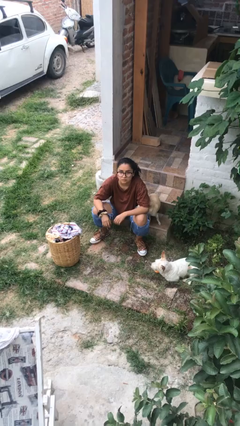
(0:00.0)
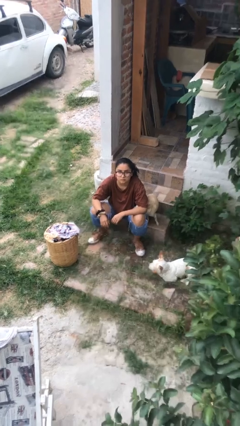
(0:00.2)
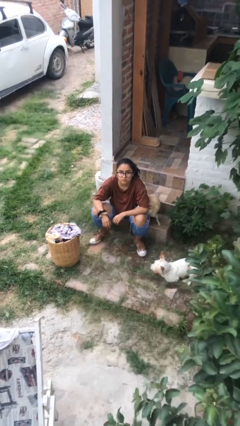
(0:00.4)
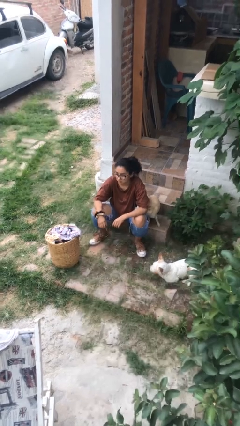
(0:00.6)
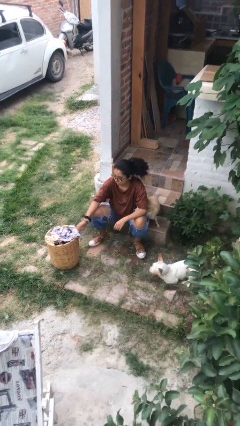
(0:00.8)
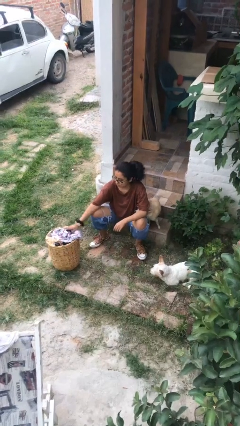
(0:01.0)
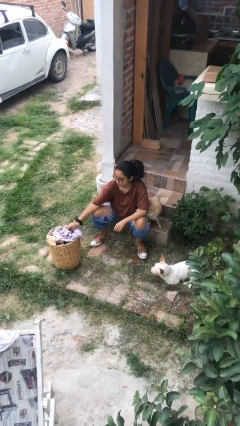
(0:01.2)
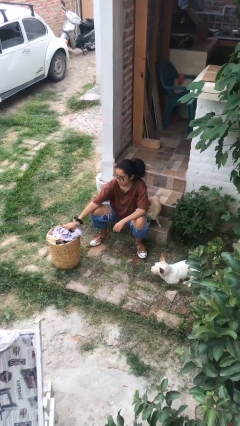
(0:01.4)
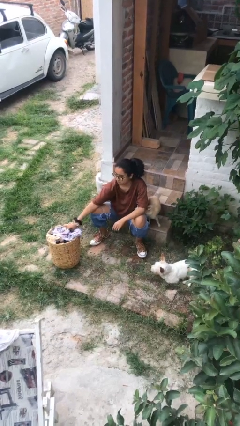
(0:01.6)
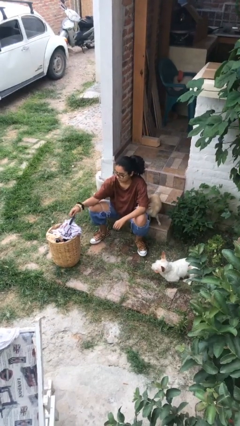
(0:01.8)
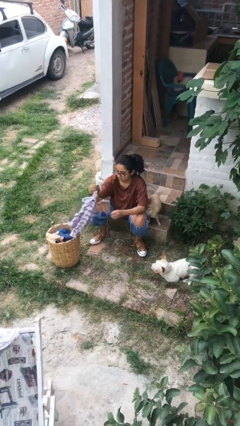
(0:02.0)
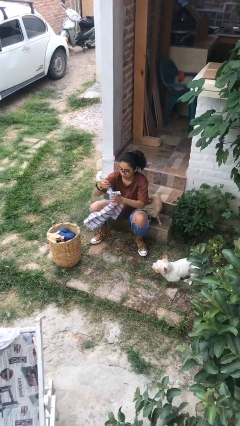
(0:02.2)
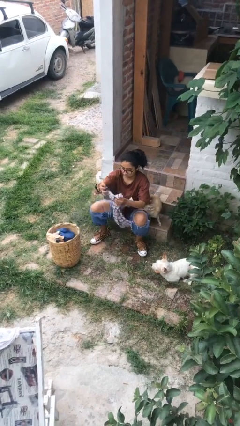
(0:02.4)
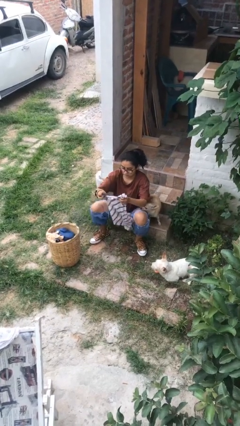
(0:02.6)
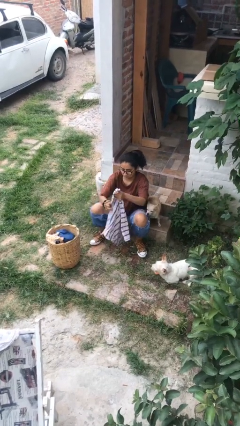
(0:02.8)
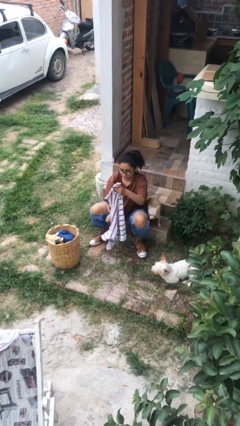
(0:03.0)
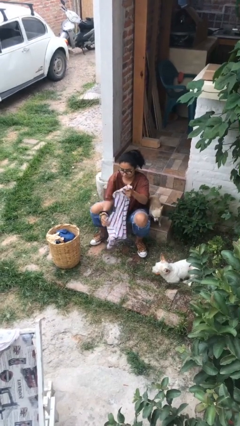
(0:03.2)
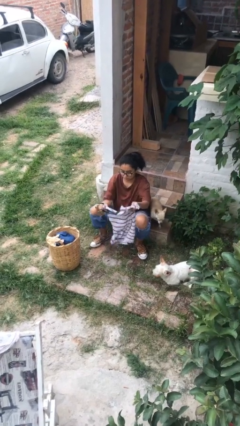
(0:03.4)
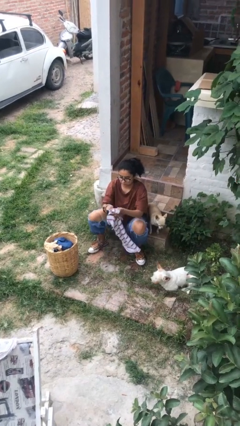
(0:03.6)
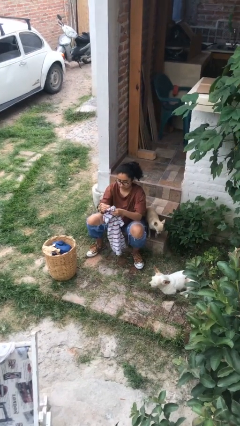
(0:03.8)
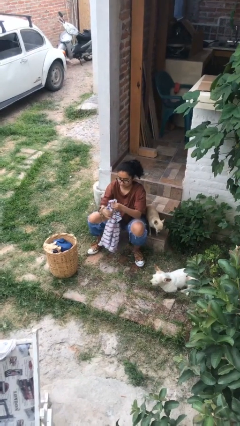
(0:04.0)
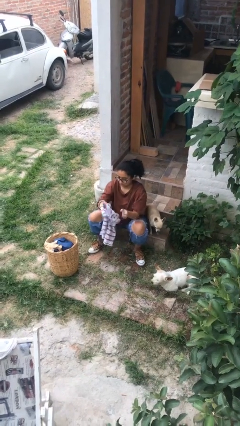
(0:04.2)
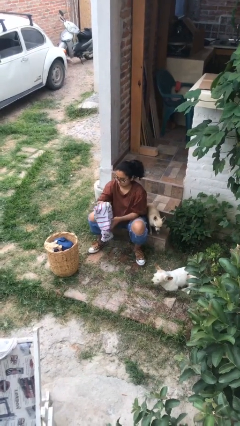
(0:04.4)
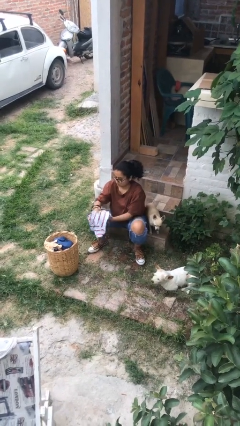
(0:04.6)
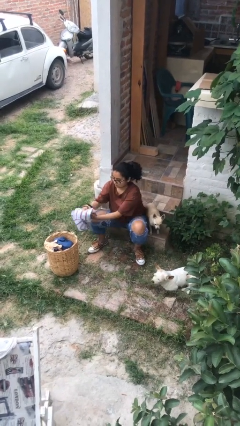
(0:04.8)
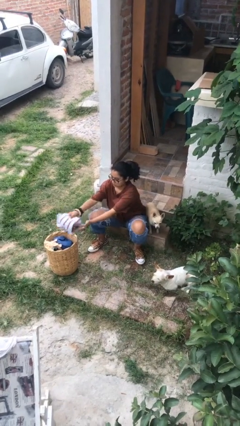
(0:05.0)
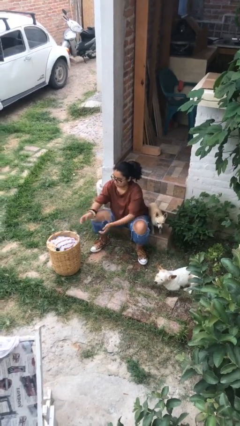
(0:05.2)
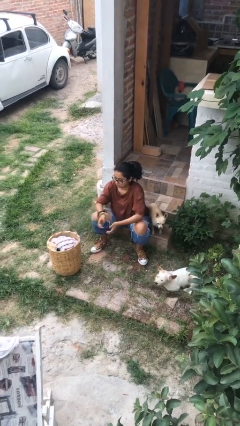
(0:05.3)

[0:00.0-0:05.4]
person folds shirt

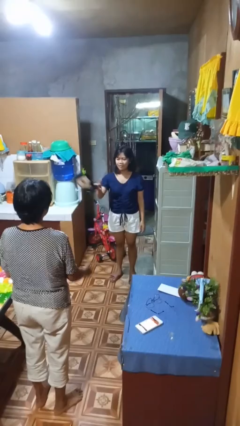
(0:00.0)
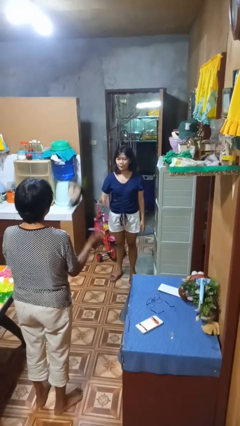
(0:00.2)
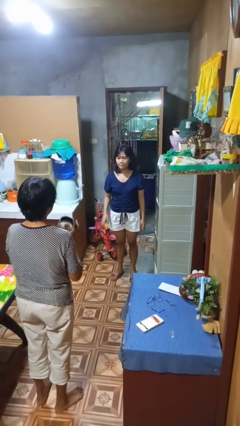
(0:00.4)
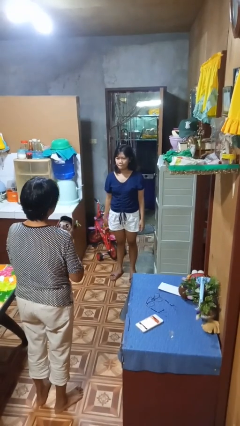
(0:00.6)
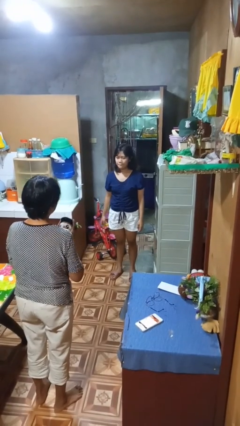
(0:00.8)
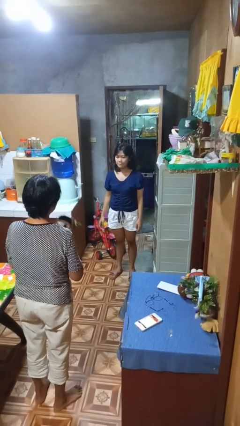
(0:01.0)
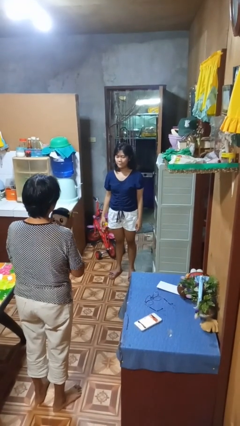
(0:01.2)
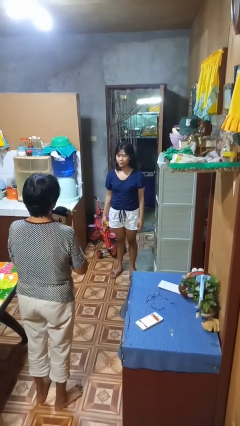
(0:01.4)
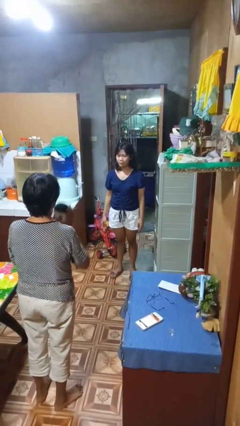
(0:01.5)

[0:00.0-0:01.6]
person throws object to person

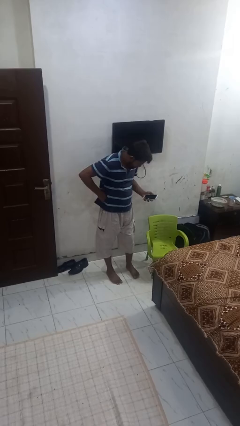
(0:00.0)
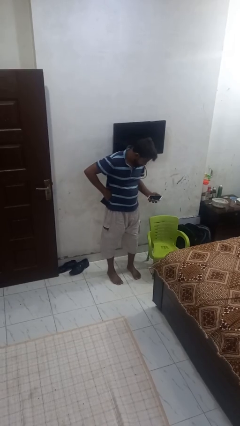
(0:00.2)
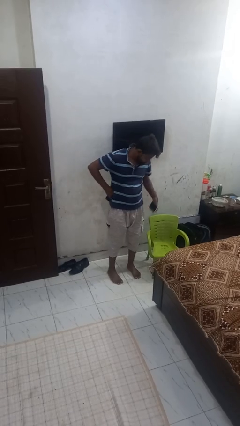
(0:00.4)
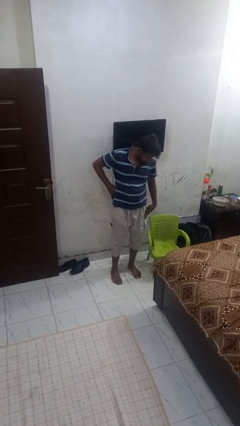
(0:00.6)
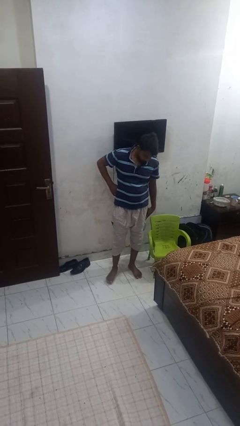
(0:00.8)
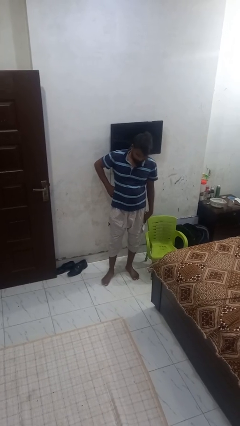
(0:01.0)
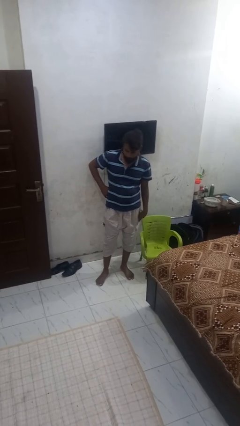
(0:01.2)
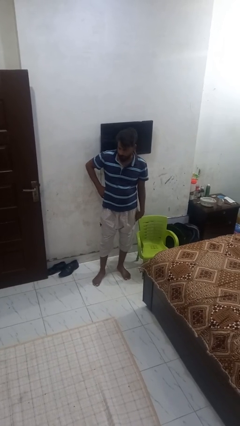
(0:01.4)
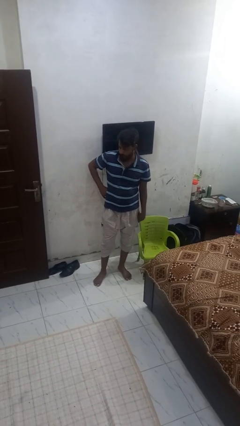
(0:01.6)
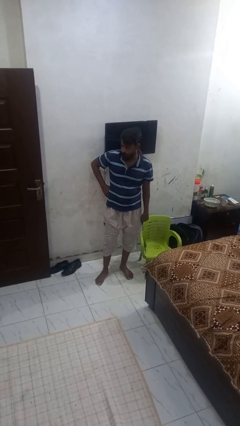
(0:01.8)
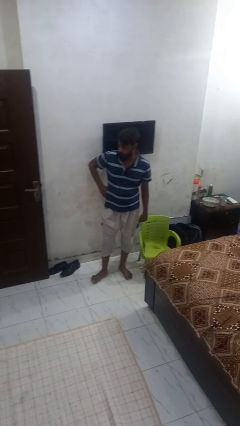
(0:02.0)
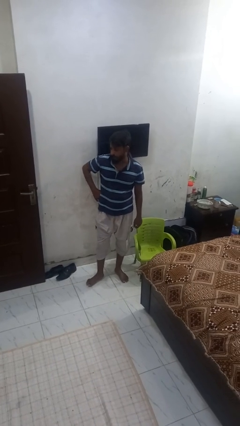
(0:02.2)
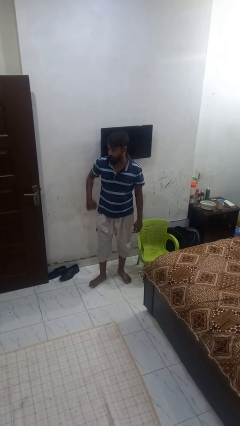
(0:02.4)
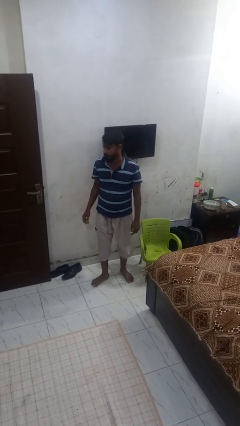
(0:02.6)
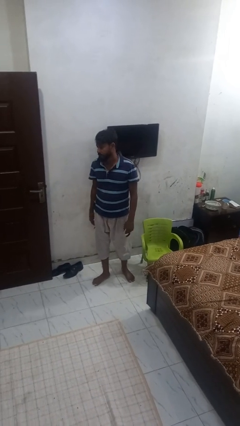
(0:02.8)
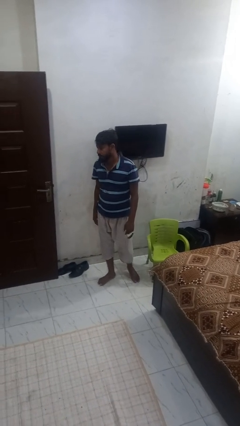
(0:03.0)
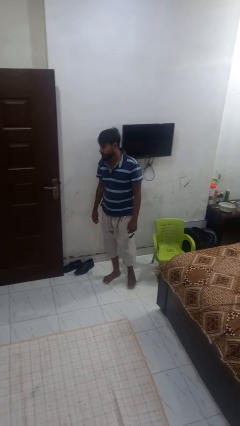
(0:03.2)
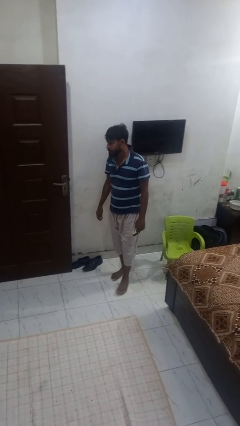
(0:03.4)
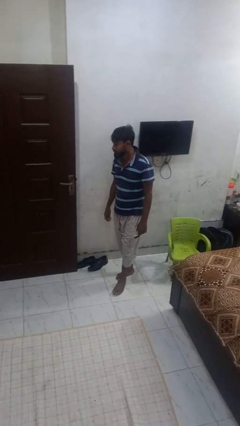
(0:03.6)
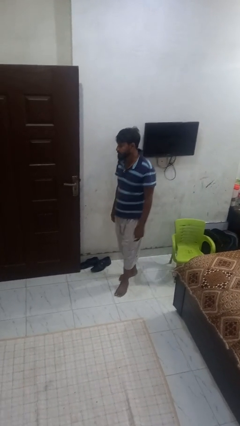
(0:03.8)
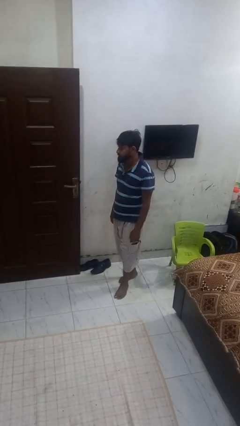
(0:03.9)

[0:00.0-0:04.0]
person puts phone into pocket

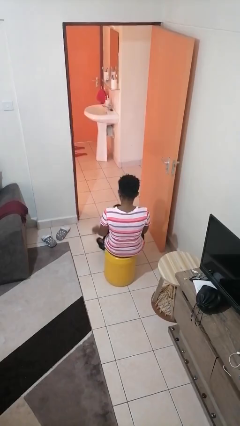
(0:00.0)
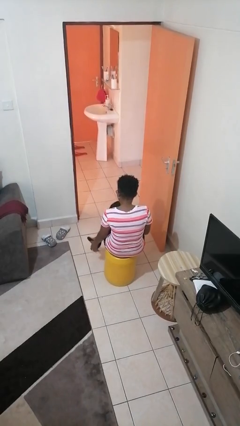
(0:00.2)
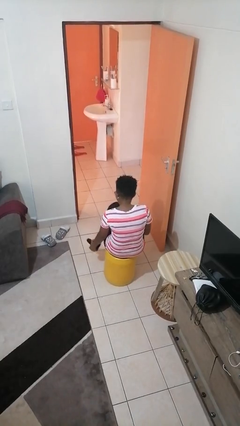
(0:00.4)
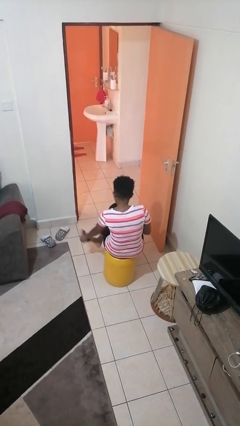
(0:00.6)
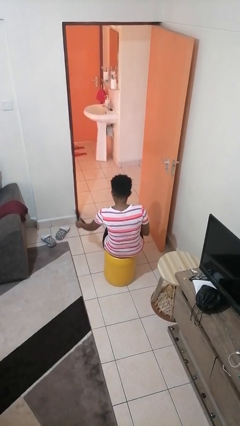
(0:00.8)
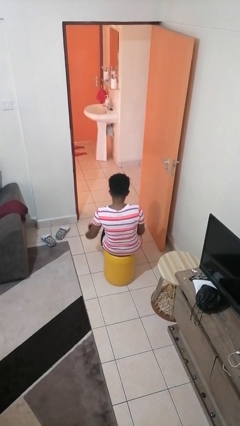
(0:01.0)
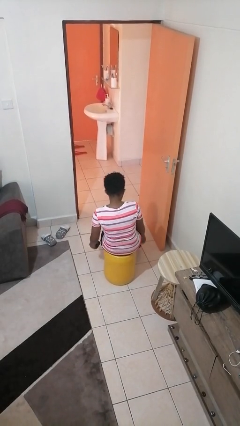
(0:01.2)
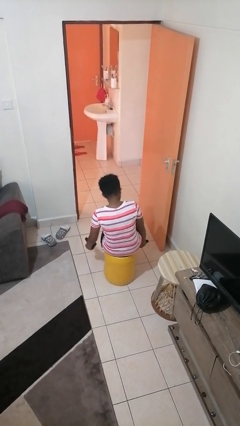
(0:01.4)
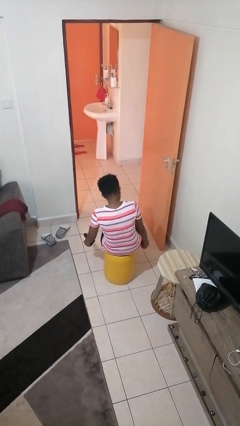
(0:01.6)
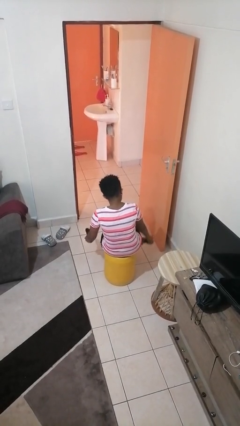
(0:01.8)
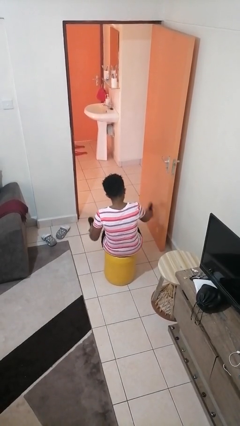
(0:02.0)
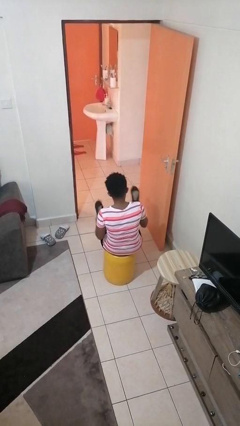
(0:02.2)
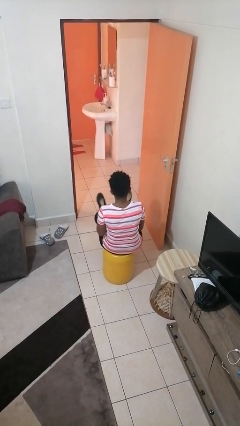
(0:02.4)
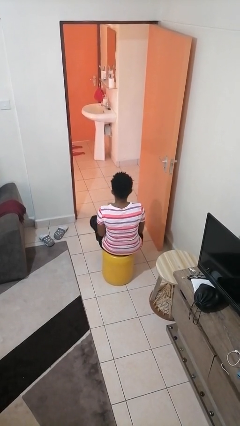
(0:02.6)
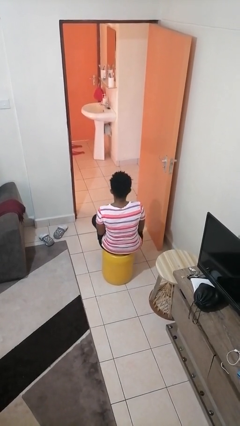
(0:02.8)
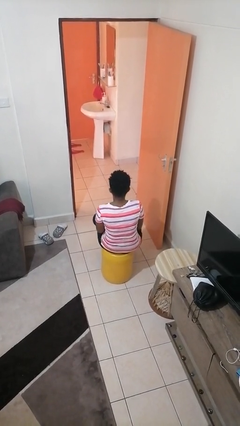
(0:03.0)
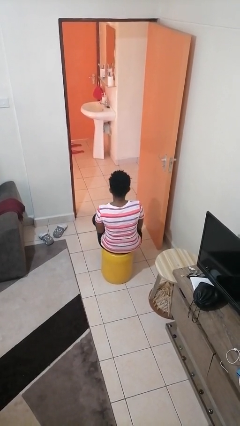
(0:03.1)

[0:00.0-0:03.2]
person takes off shoes

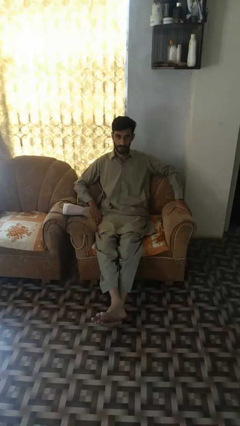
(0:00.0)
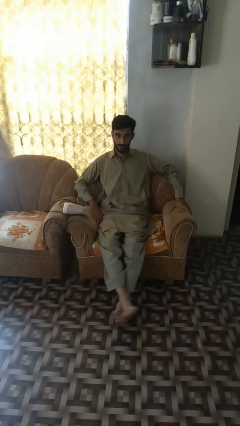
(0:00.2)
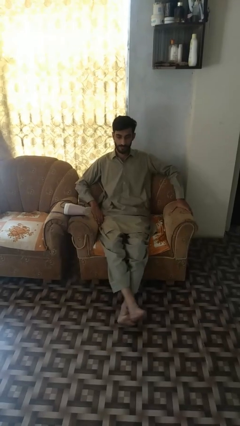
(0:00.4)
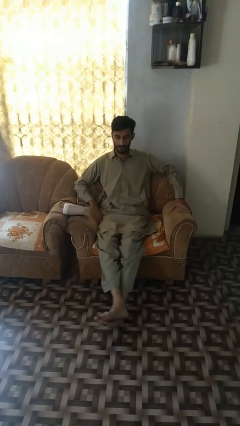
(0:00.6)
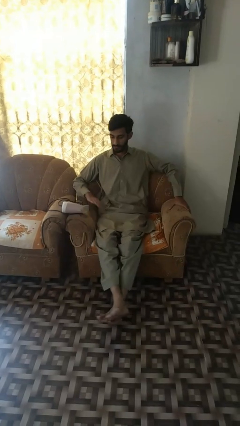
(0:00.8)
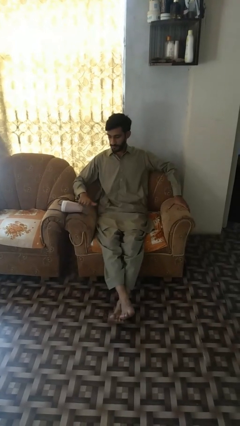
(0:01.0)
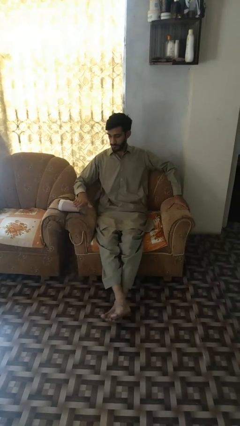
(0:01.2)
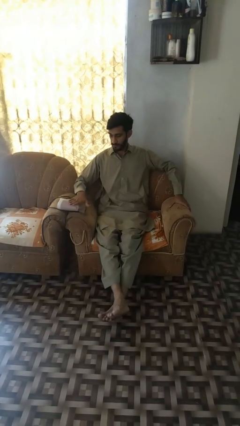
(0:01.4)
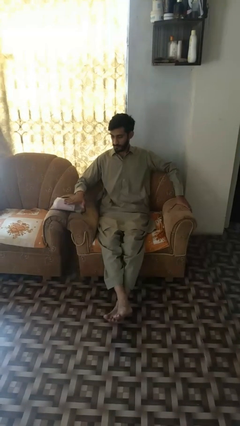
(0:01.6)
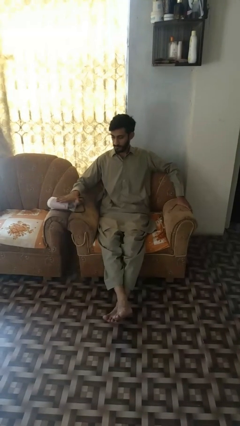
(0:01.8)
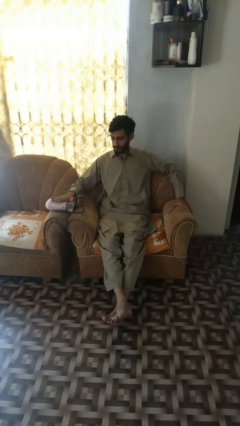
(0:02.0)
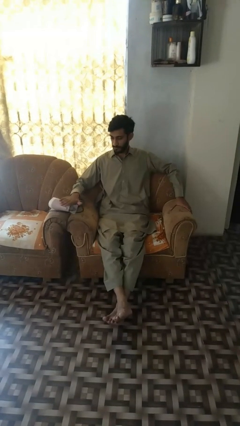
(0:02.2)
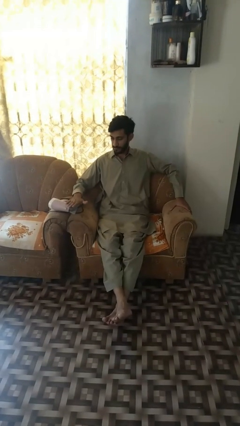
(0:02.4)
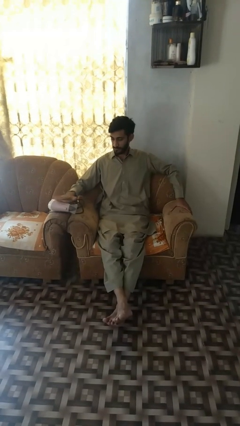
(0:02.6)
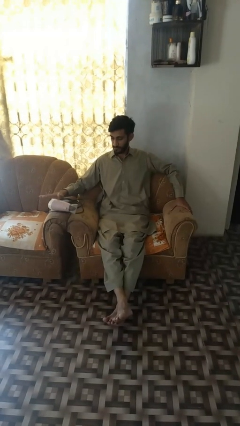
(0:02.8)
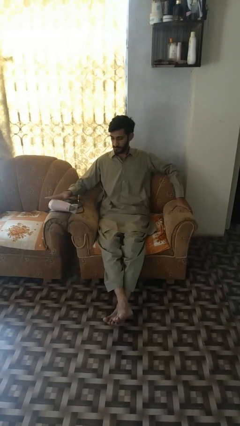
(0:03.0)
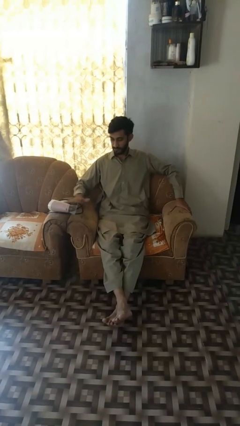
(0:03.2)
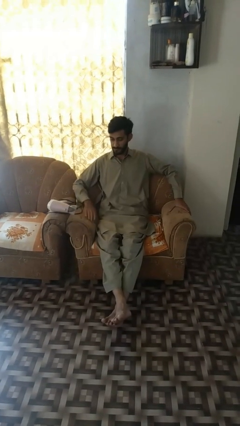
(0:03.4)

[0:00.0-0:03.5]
person waves hand over object
